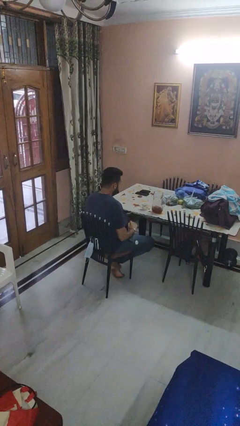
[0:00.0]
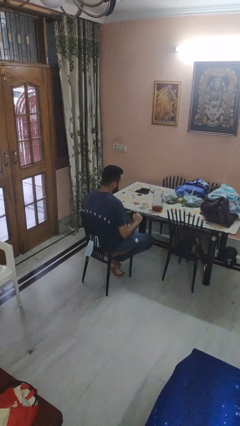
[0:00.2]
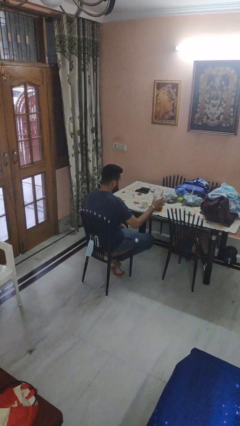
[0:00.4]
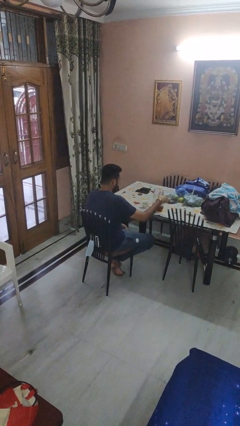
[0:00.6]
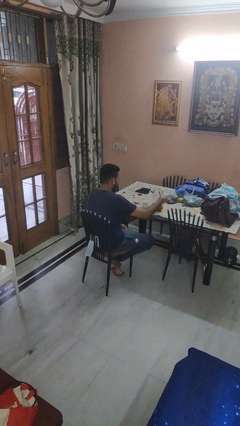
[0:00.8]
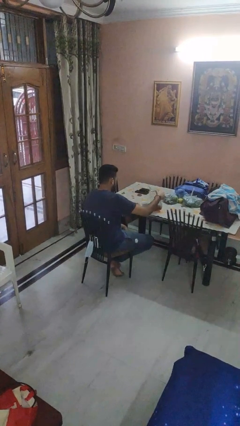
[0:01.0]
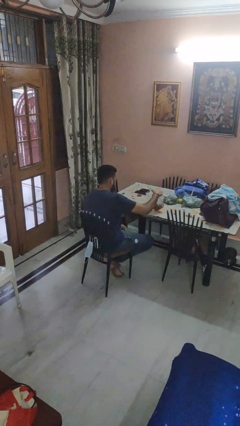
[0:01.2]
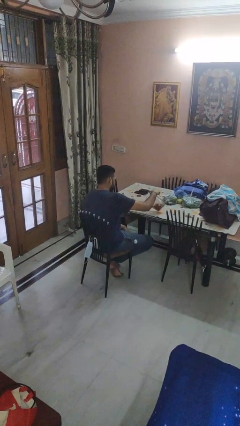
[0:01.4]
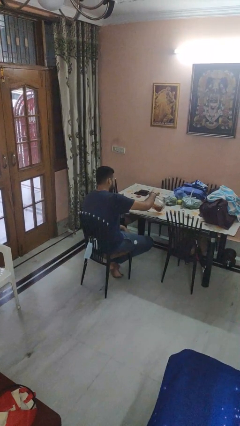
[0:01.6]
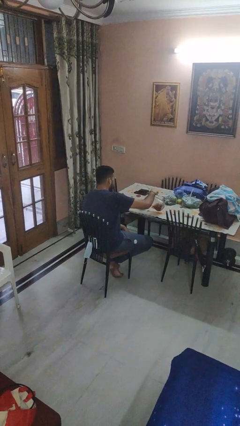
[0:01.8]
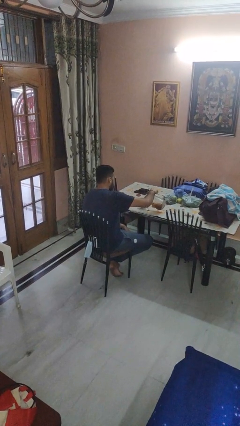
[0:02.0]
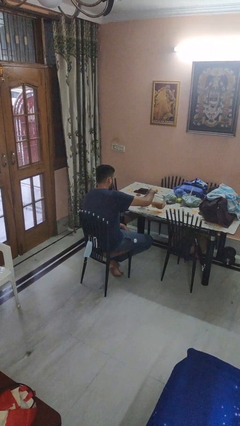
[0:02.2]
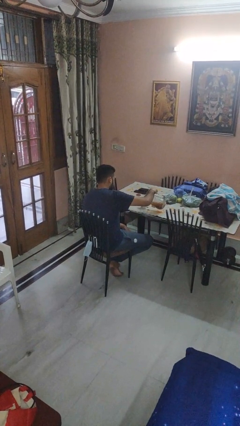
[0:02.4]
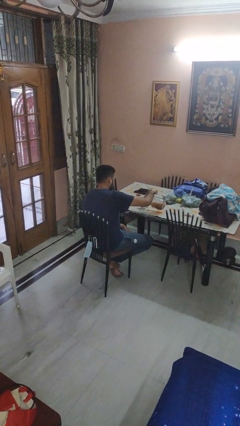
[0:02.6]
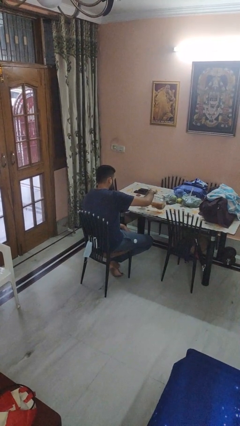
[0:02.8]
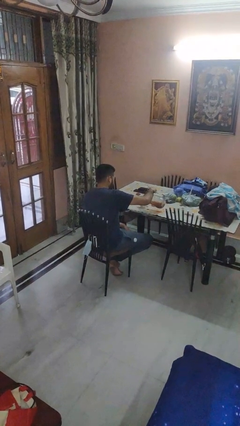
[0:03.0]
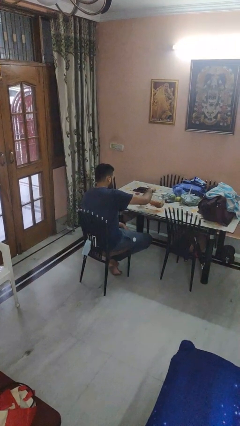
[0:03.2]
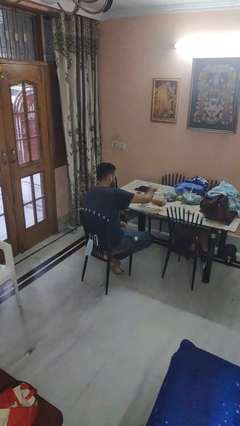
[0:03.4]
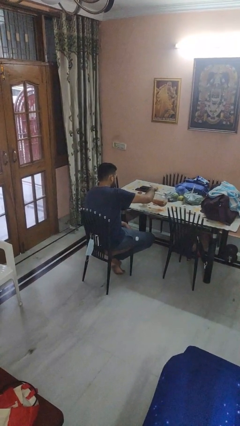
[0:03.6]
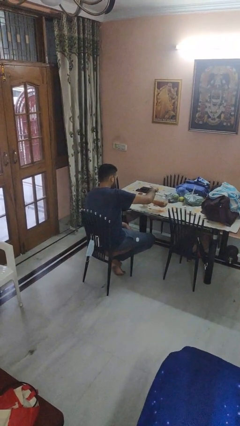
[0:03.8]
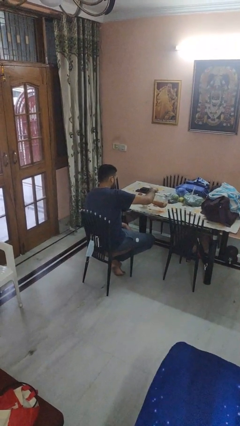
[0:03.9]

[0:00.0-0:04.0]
person pours coffee into mug

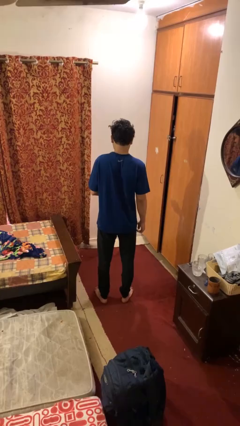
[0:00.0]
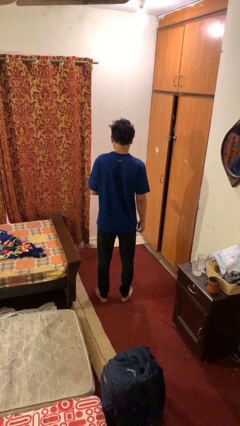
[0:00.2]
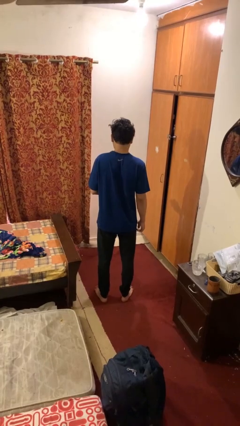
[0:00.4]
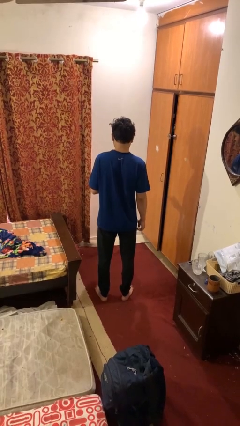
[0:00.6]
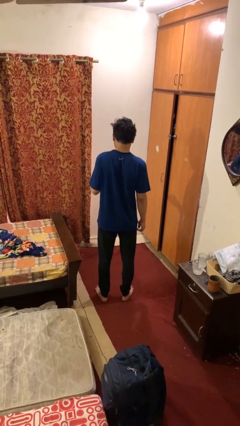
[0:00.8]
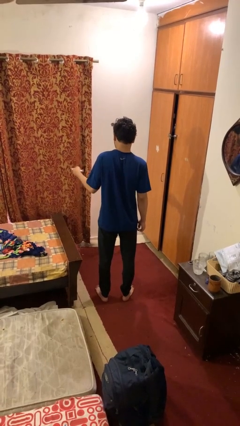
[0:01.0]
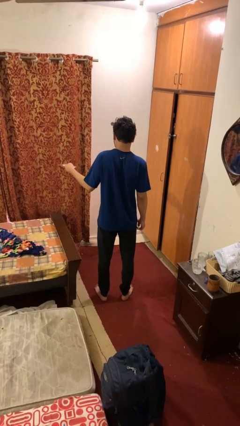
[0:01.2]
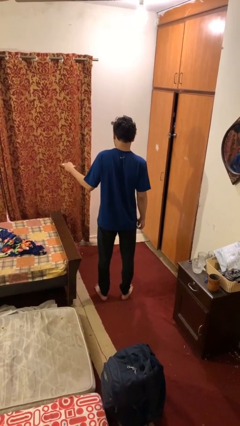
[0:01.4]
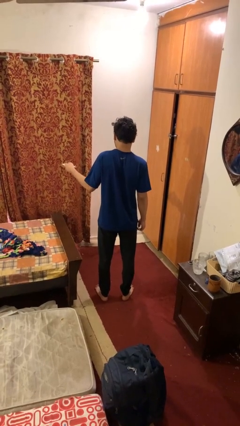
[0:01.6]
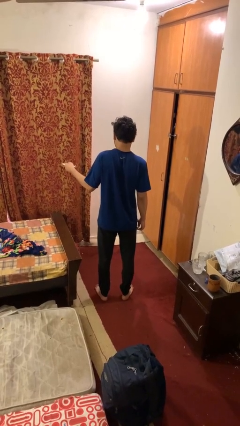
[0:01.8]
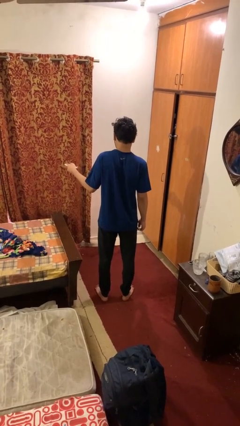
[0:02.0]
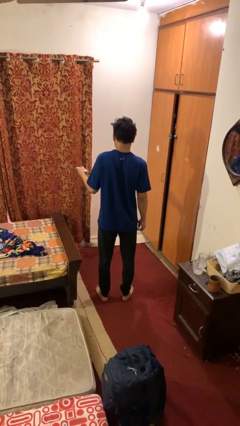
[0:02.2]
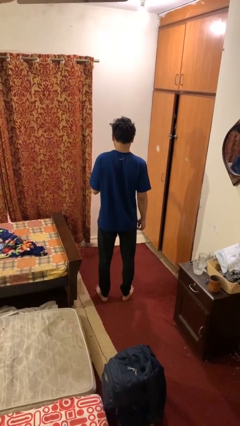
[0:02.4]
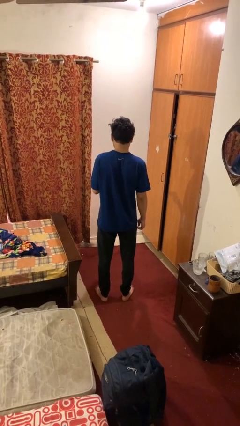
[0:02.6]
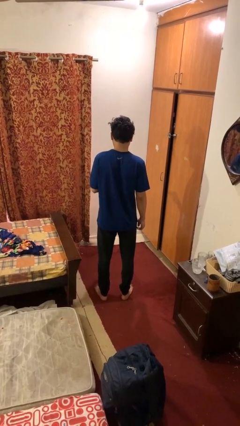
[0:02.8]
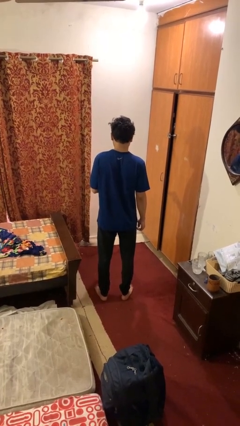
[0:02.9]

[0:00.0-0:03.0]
person uses television remote

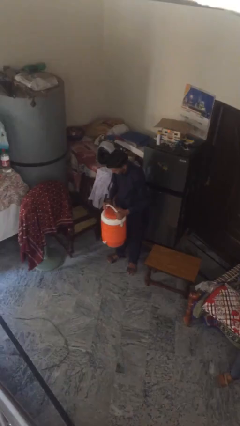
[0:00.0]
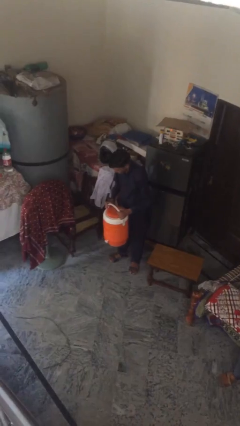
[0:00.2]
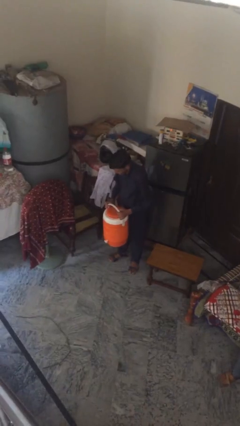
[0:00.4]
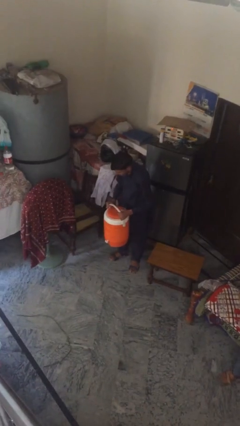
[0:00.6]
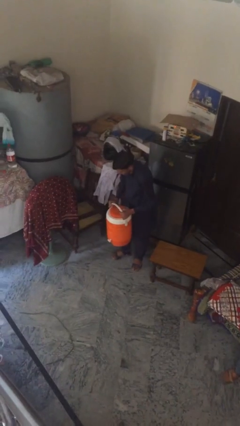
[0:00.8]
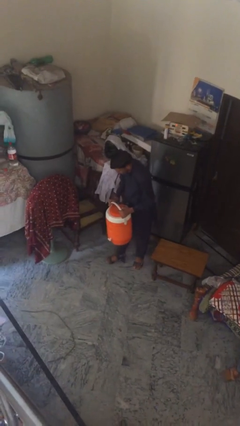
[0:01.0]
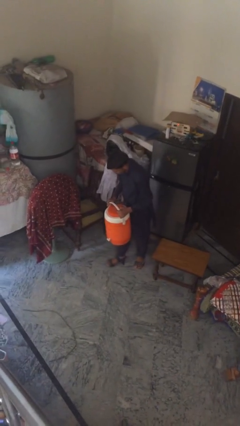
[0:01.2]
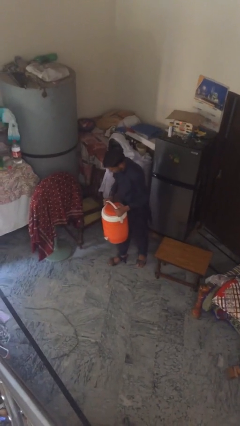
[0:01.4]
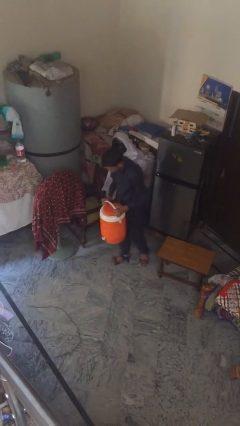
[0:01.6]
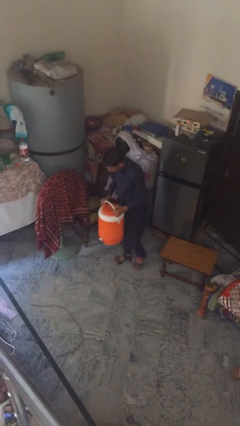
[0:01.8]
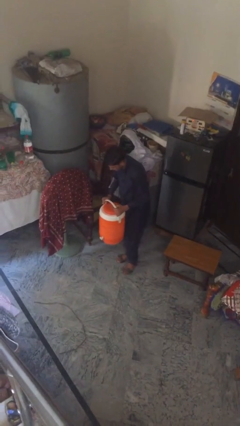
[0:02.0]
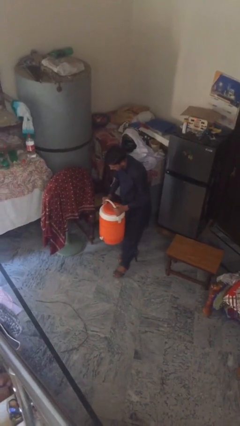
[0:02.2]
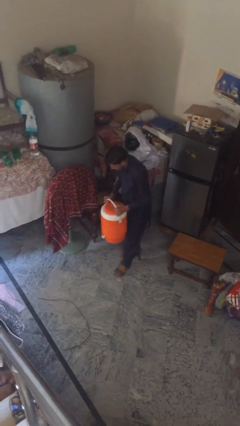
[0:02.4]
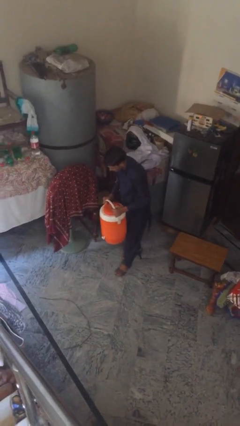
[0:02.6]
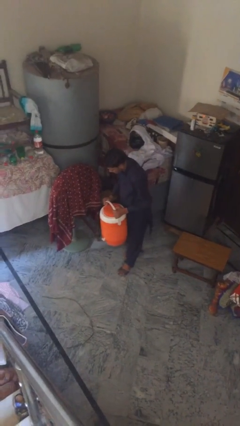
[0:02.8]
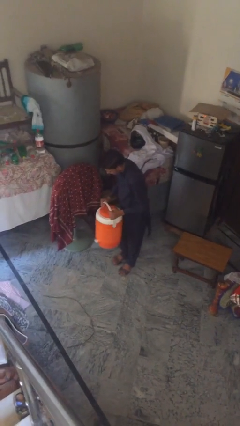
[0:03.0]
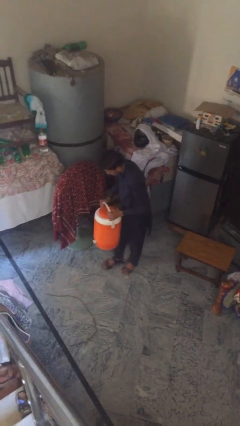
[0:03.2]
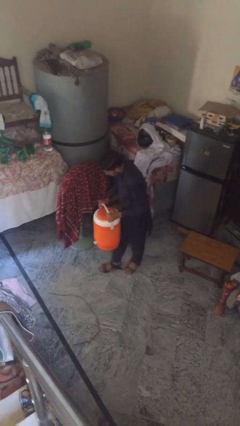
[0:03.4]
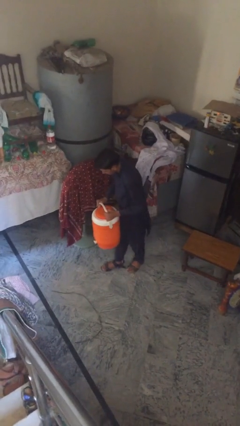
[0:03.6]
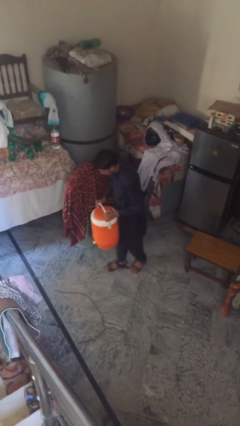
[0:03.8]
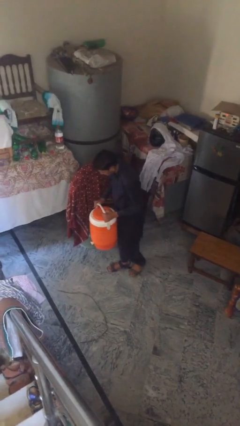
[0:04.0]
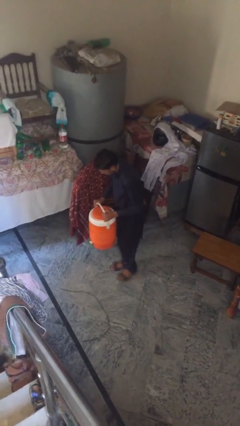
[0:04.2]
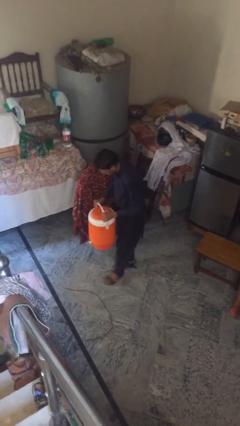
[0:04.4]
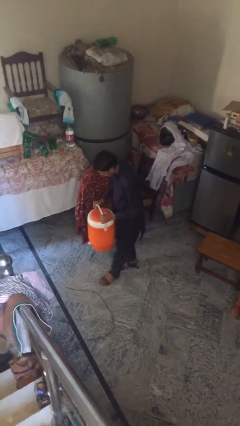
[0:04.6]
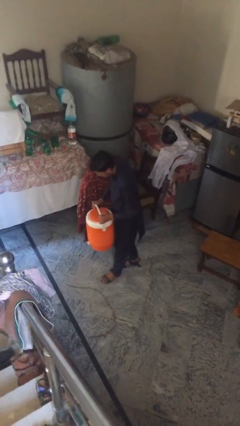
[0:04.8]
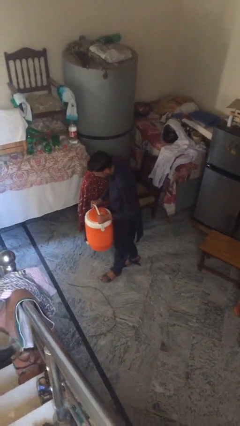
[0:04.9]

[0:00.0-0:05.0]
person carries heavy object

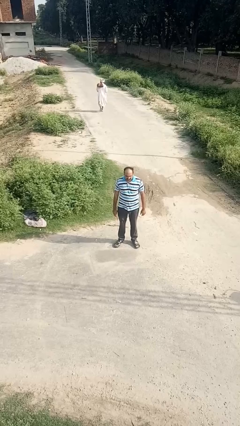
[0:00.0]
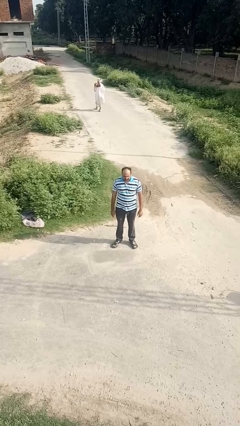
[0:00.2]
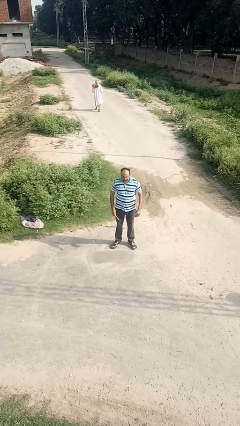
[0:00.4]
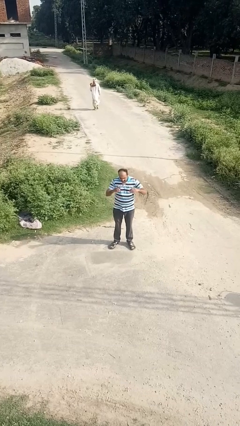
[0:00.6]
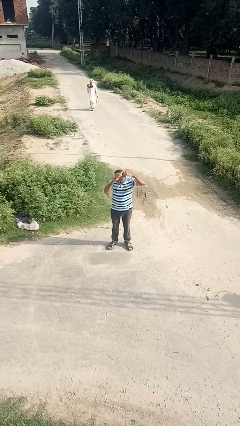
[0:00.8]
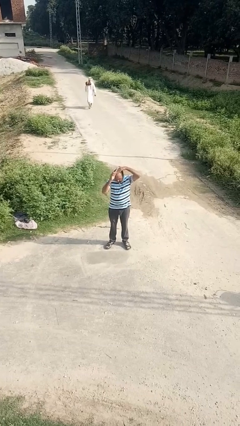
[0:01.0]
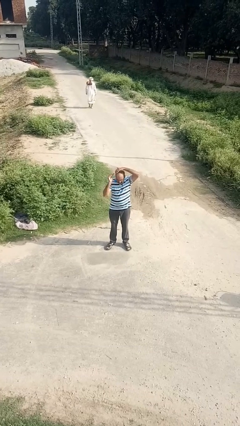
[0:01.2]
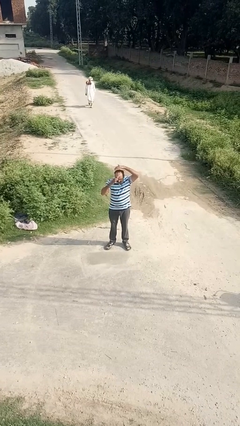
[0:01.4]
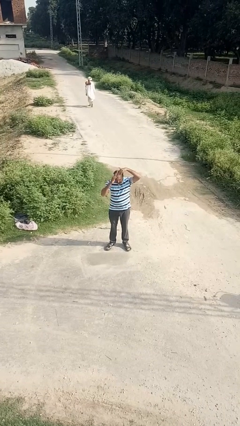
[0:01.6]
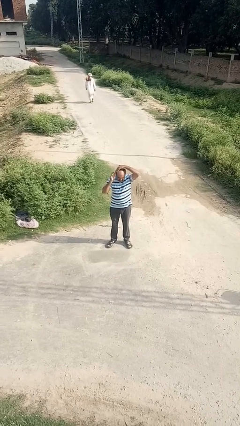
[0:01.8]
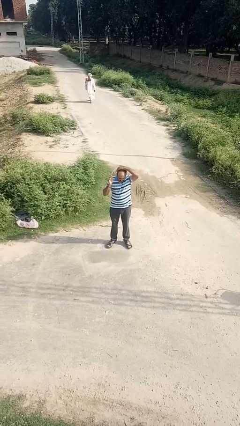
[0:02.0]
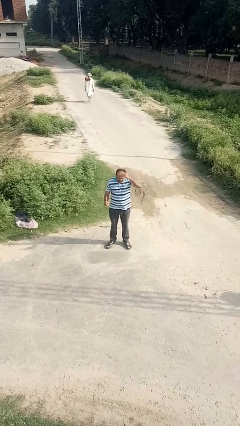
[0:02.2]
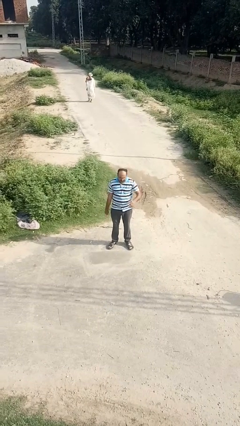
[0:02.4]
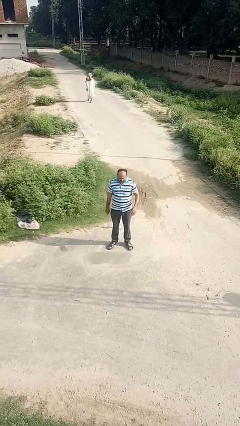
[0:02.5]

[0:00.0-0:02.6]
person brushes hair

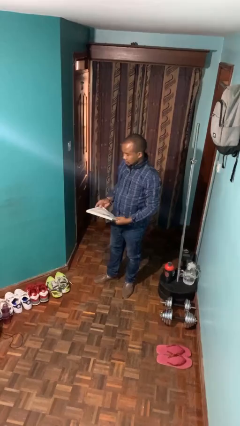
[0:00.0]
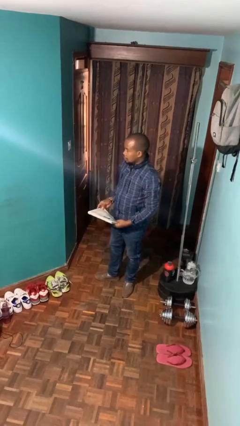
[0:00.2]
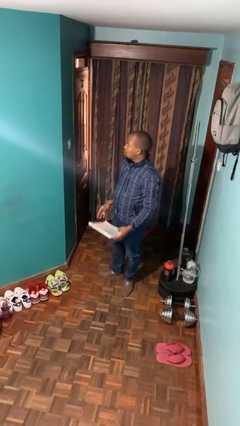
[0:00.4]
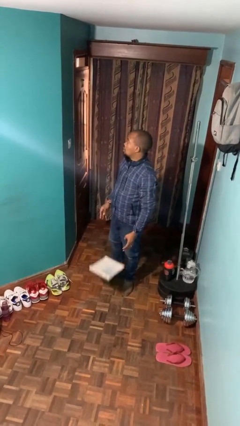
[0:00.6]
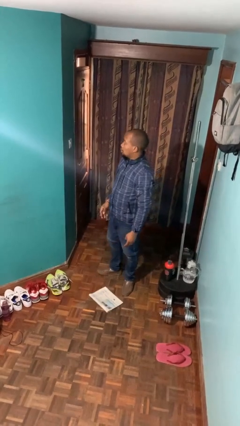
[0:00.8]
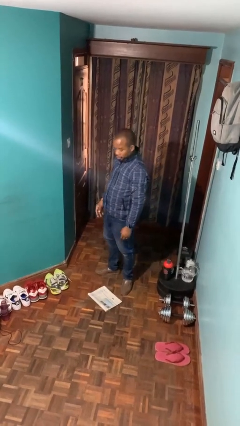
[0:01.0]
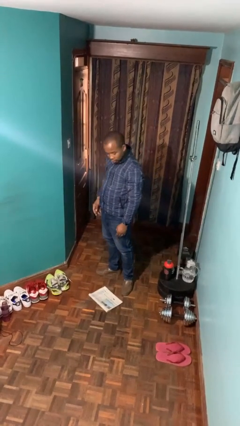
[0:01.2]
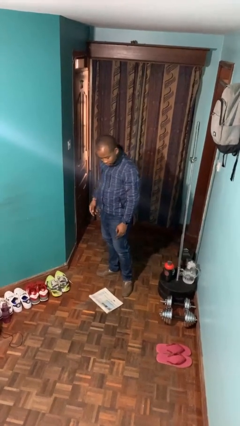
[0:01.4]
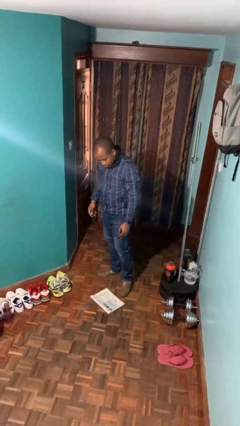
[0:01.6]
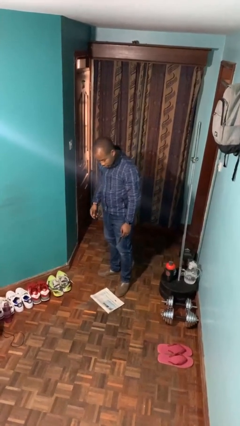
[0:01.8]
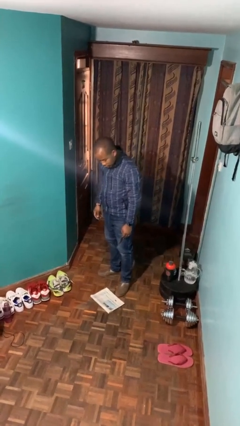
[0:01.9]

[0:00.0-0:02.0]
person drops object

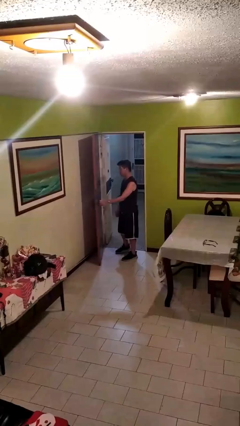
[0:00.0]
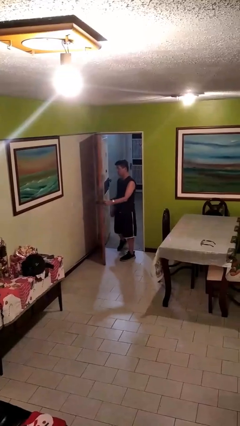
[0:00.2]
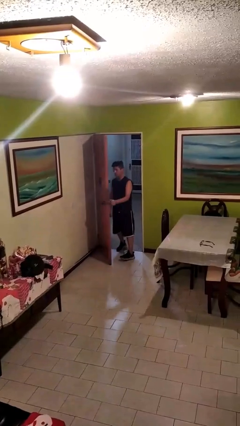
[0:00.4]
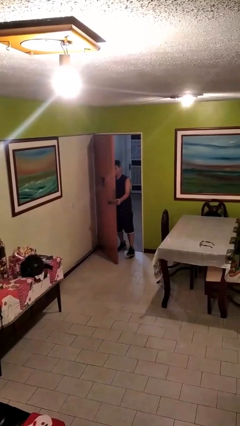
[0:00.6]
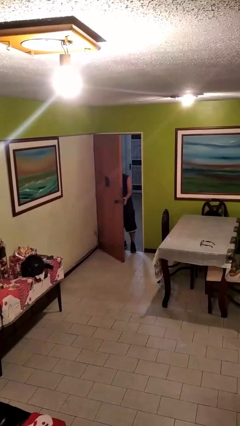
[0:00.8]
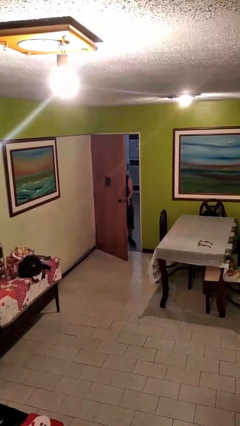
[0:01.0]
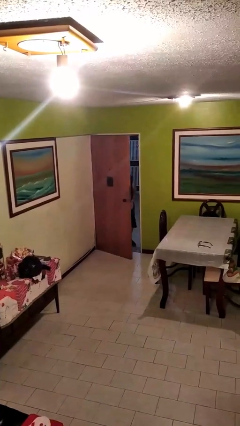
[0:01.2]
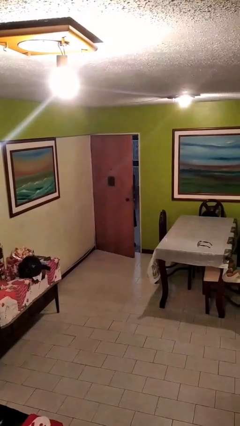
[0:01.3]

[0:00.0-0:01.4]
person closes facility door
